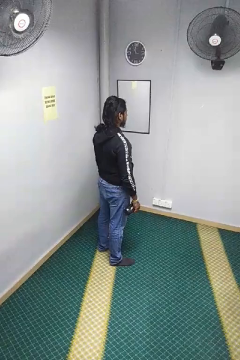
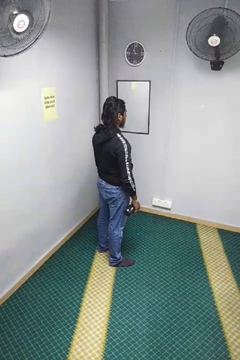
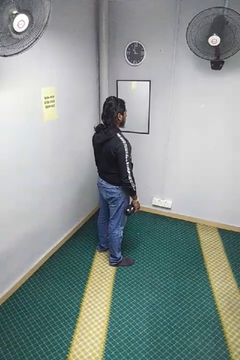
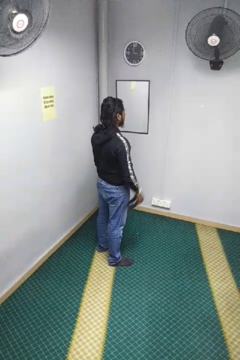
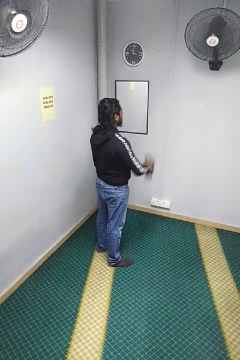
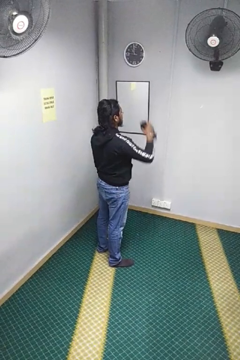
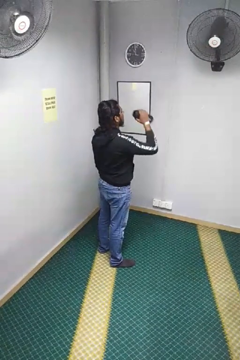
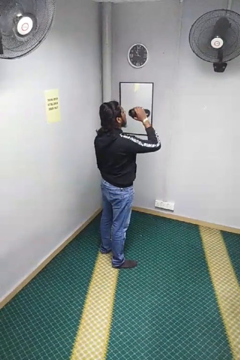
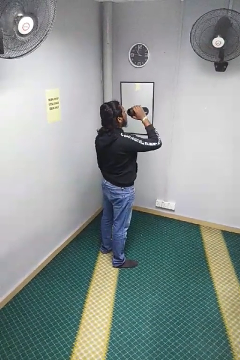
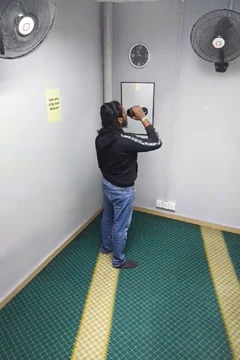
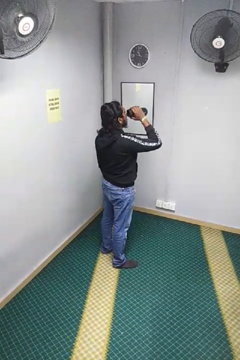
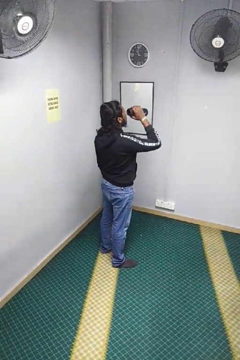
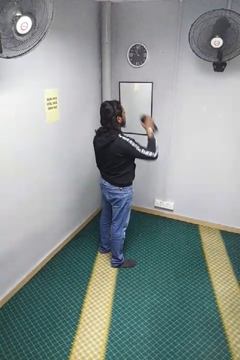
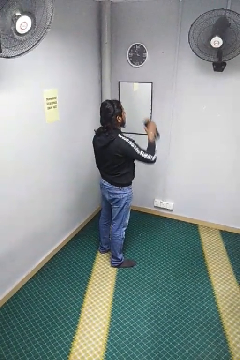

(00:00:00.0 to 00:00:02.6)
person drinks from bottle

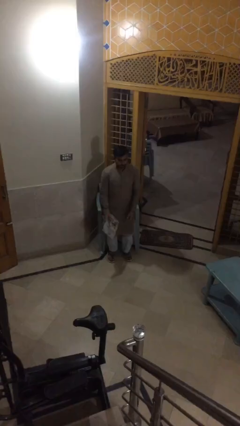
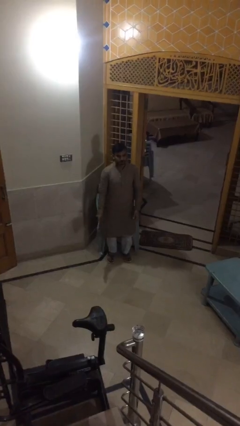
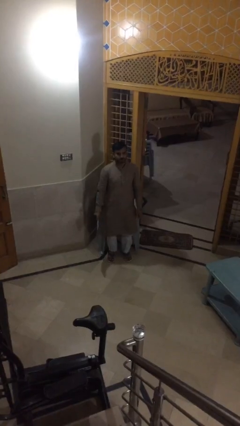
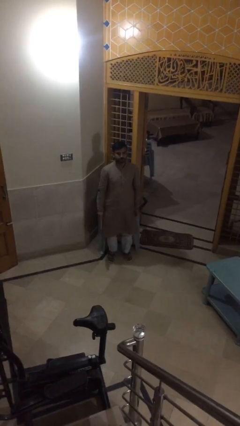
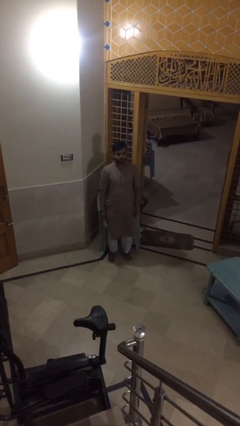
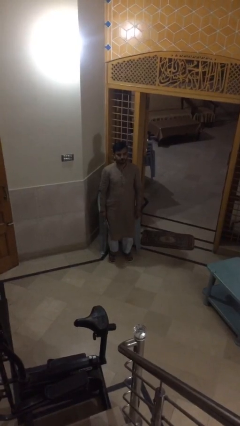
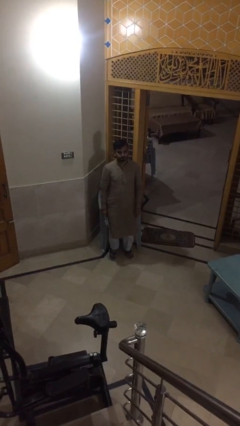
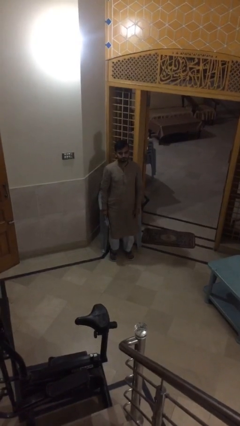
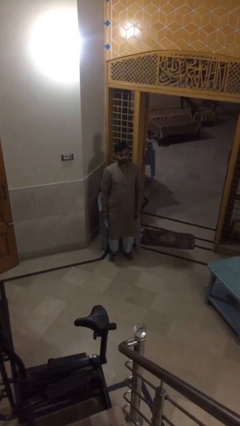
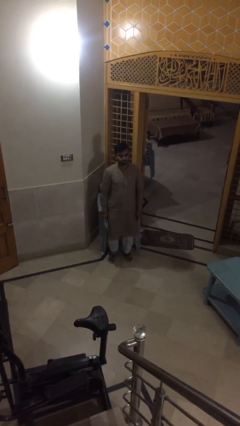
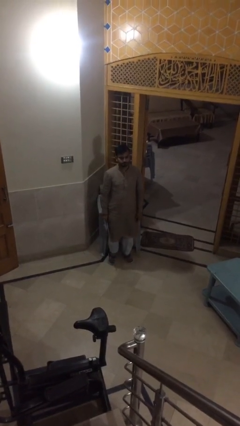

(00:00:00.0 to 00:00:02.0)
person stands up

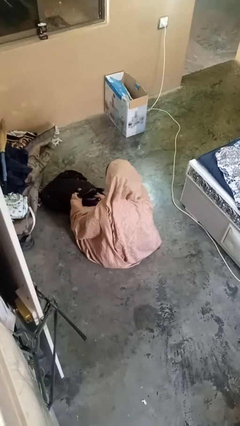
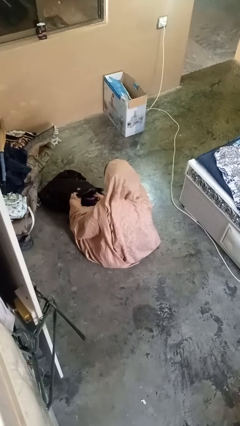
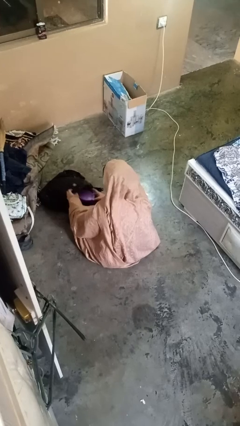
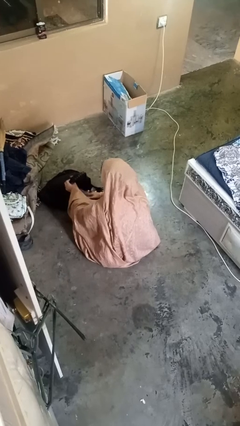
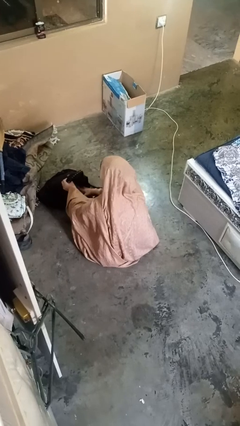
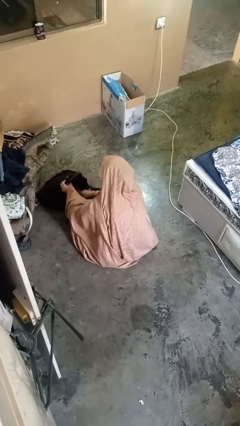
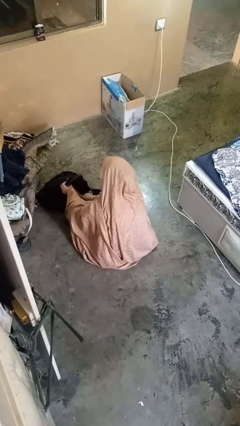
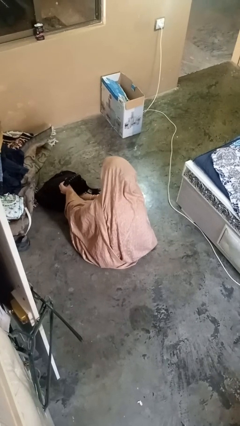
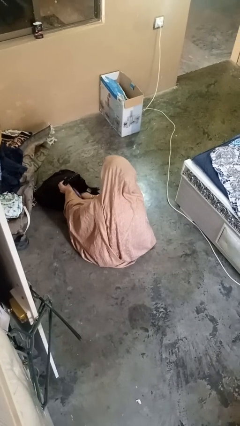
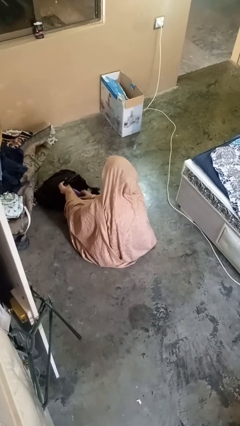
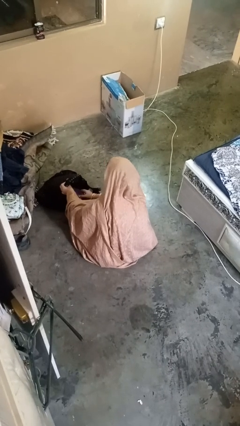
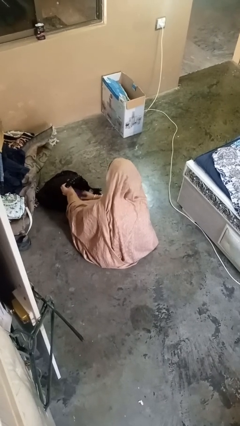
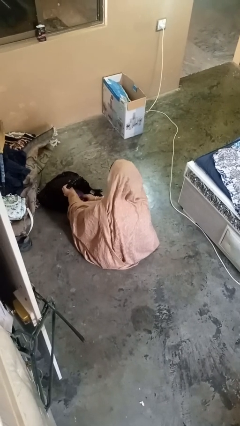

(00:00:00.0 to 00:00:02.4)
person searches in backpack

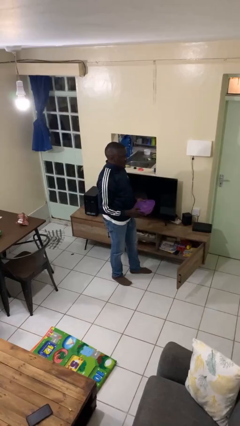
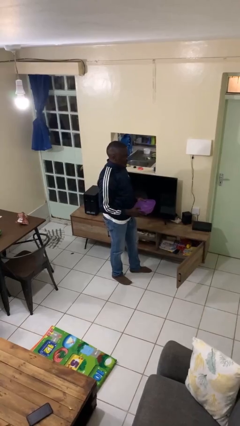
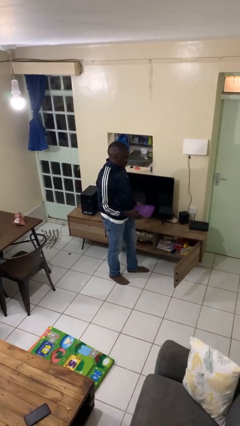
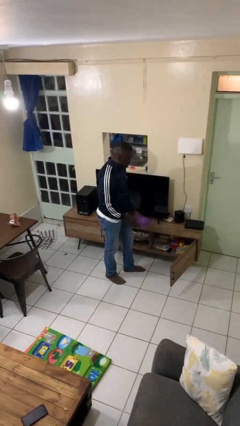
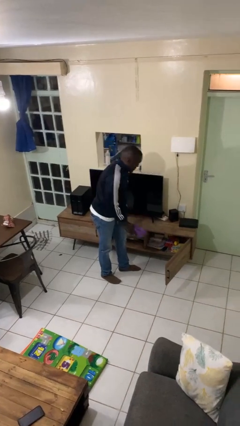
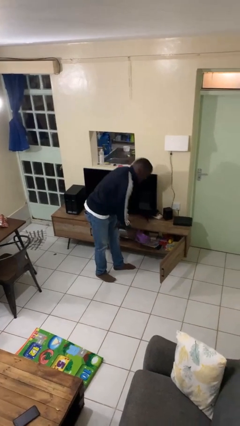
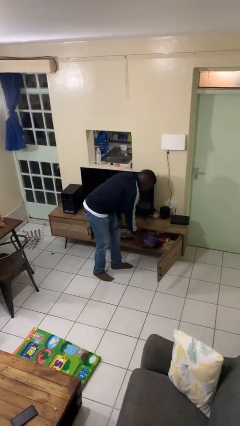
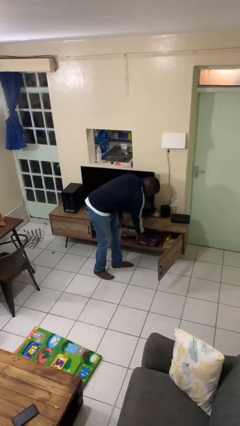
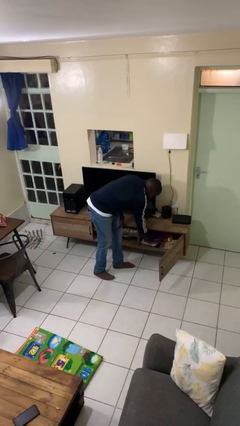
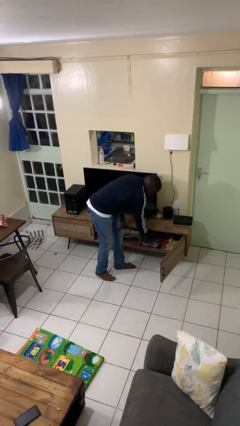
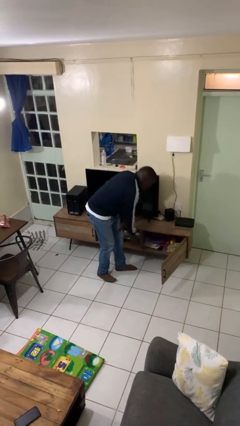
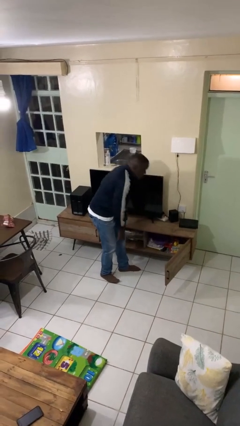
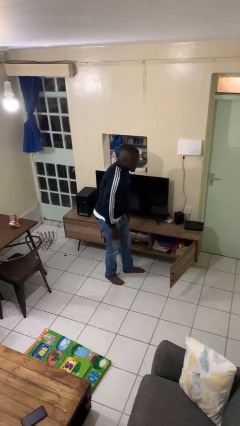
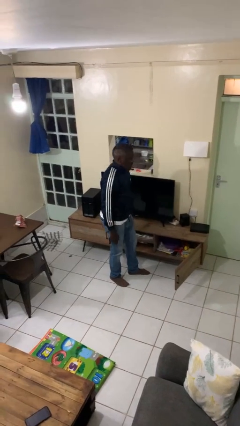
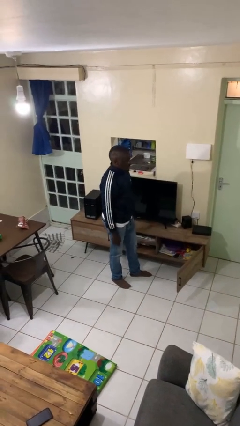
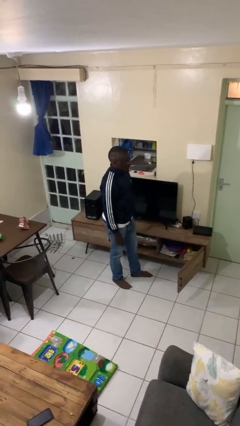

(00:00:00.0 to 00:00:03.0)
person puts down object into cabinet

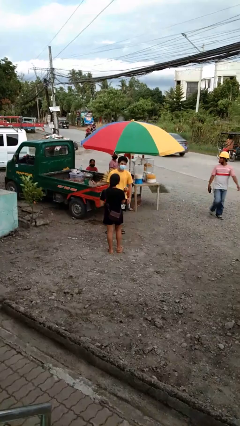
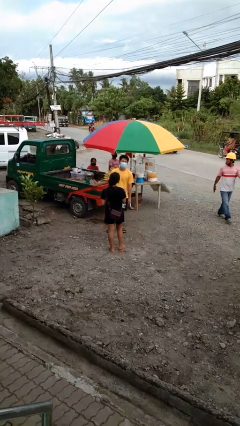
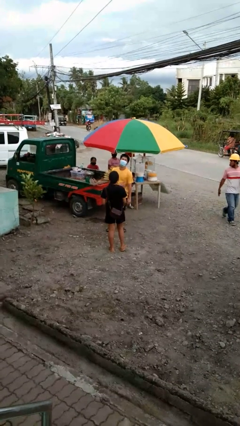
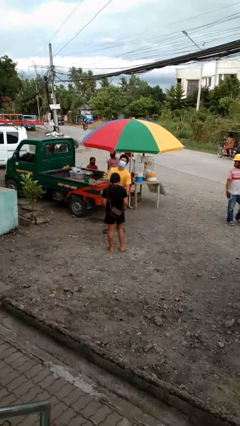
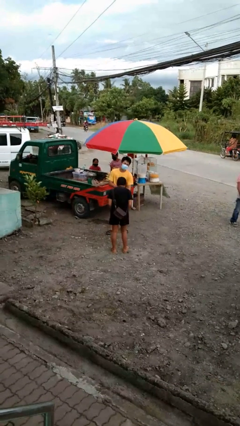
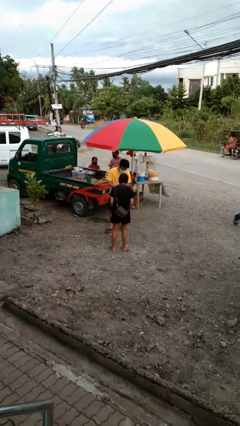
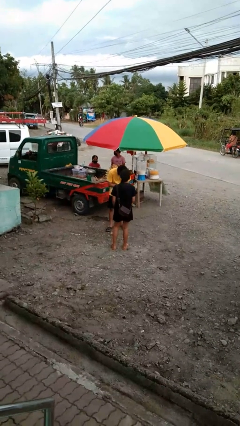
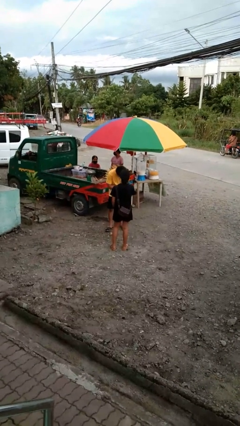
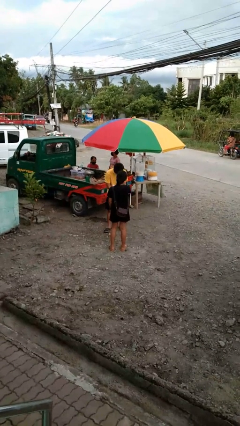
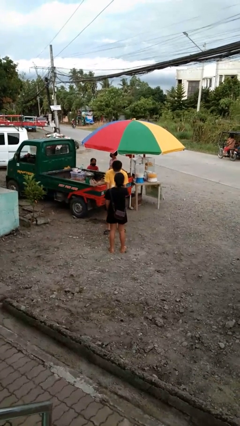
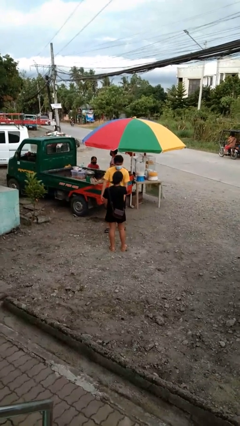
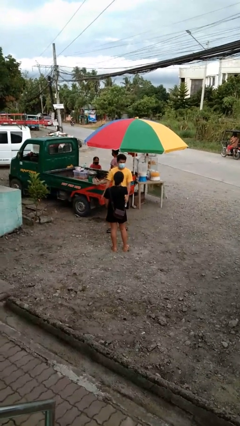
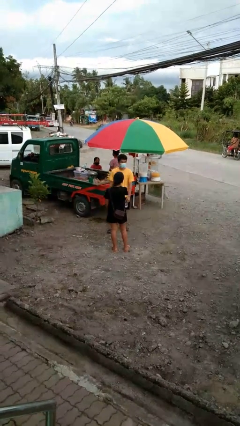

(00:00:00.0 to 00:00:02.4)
person laughs with person

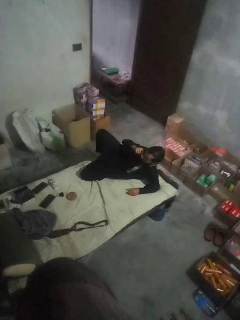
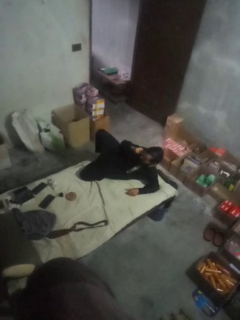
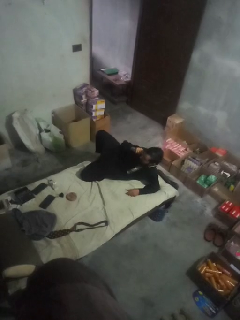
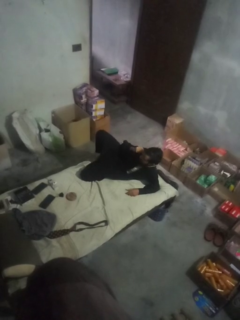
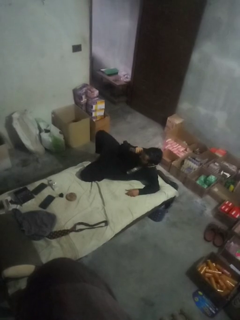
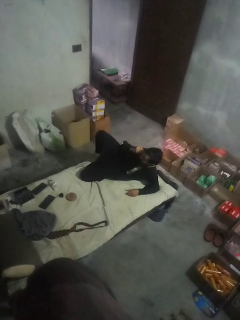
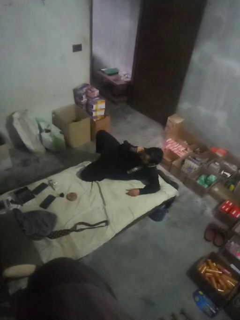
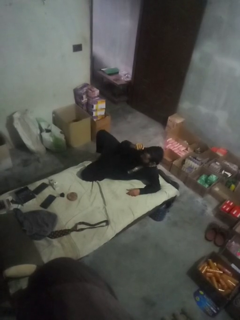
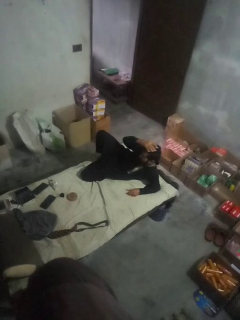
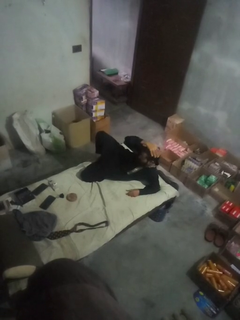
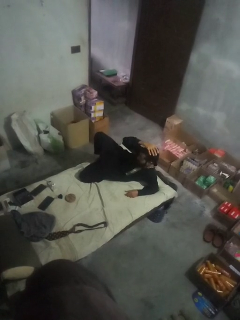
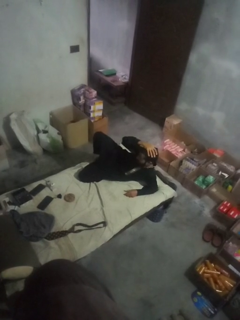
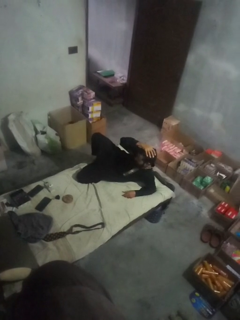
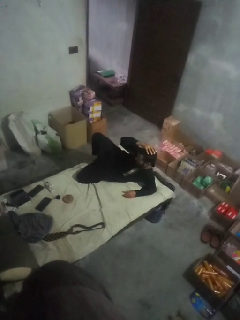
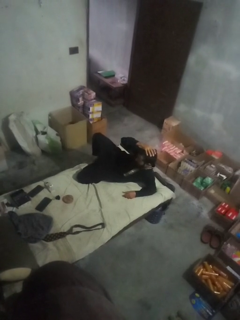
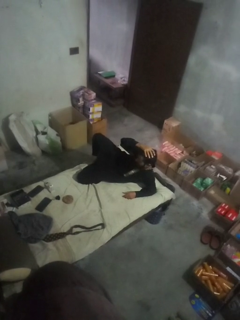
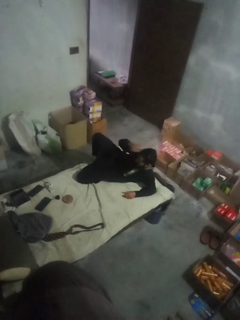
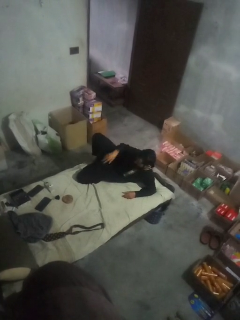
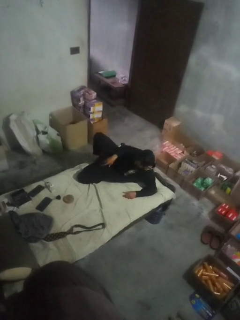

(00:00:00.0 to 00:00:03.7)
person pats head

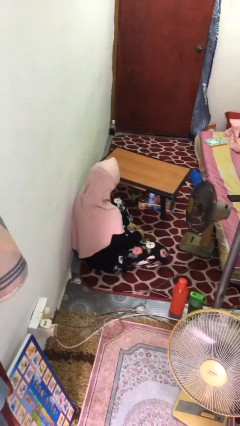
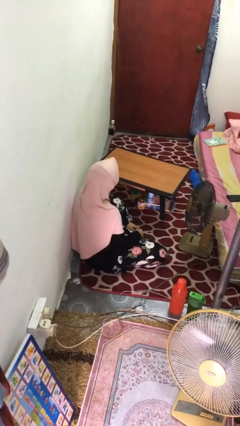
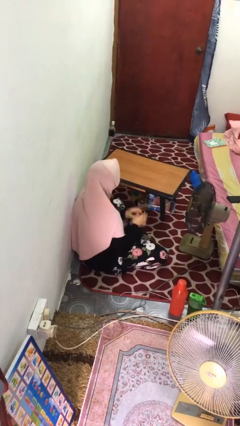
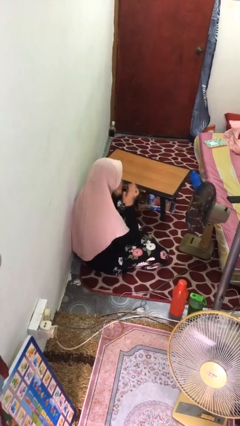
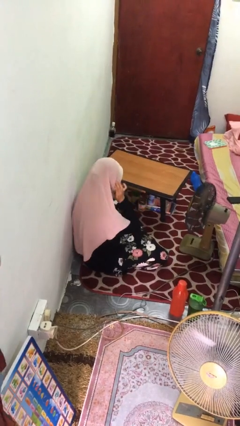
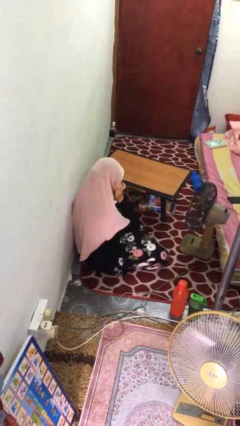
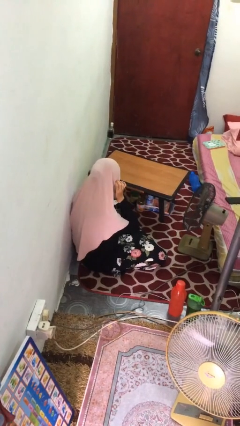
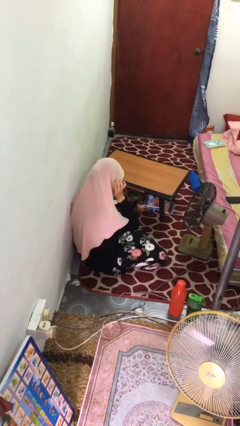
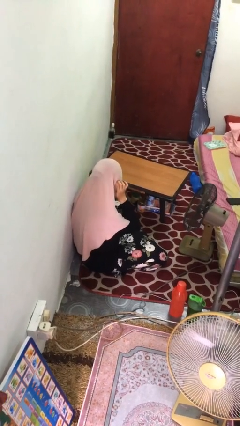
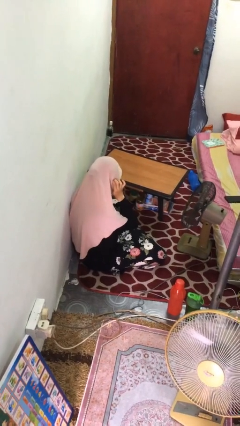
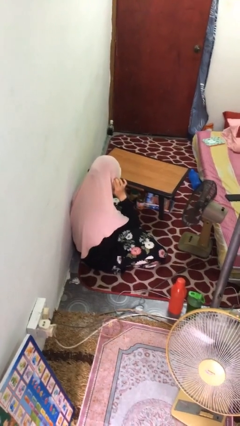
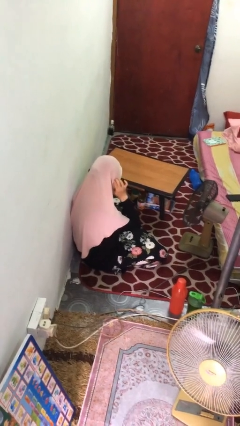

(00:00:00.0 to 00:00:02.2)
person puts fingers in ear

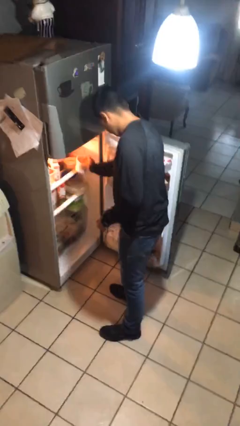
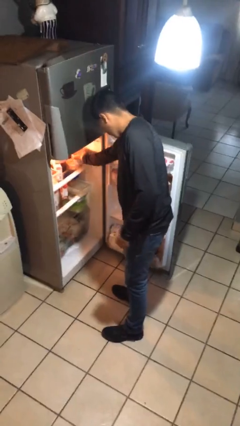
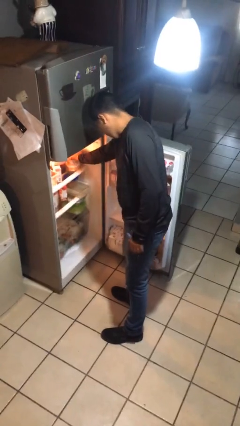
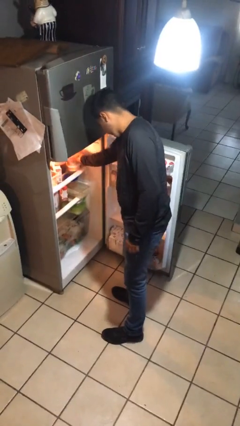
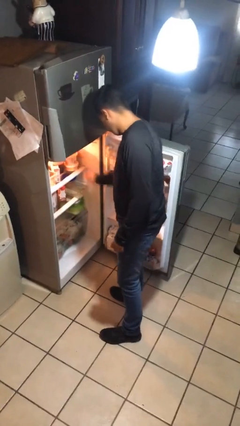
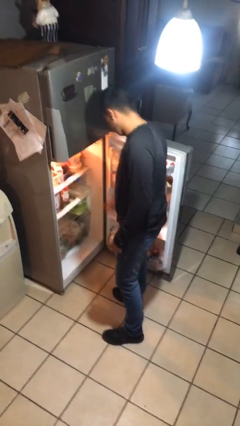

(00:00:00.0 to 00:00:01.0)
person takes object from refrigerator
